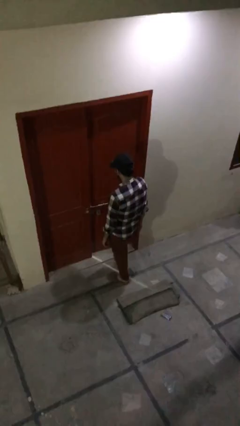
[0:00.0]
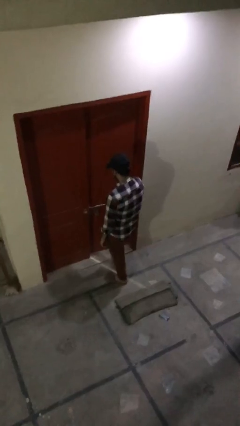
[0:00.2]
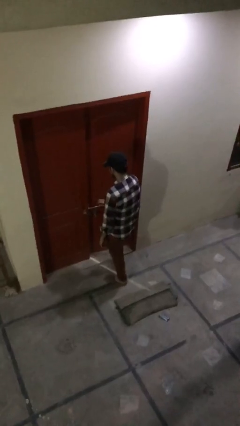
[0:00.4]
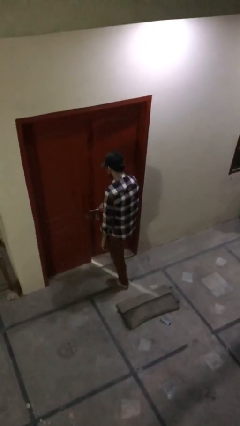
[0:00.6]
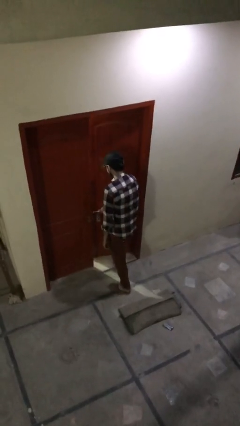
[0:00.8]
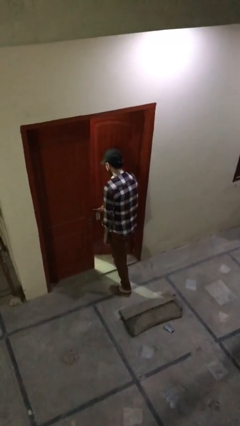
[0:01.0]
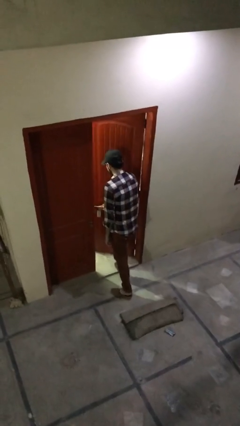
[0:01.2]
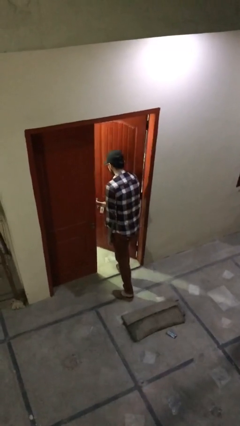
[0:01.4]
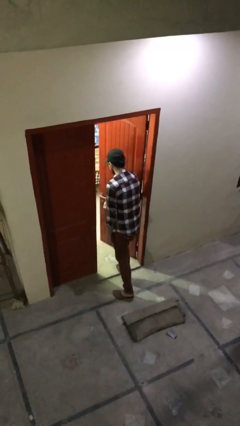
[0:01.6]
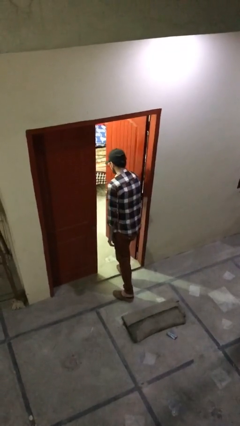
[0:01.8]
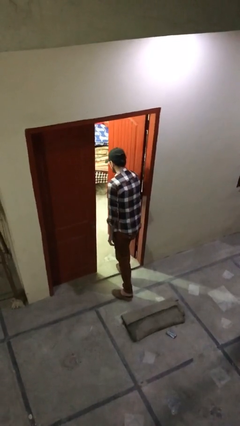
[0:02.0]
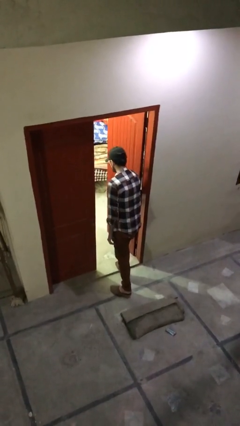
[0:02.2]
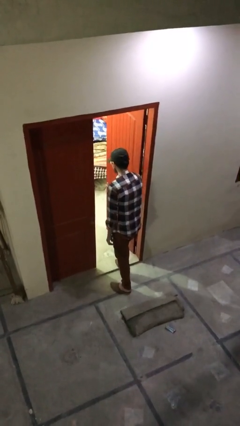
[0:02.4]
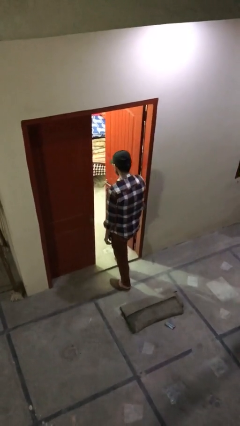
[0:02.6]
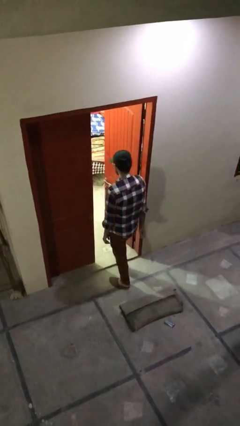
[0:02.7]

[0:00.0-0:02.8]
person opens facility door

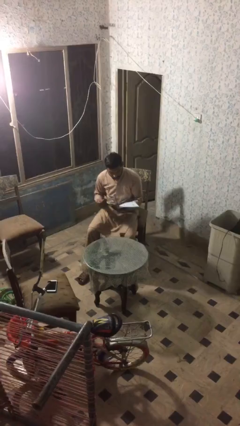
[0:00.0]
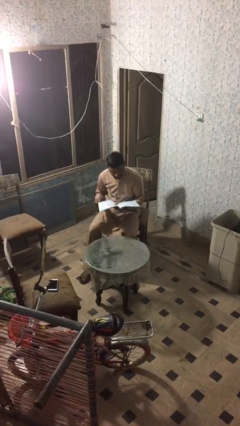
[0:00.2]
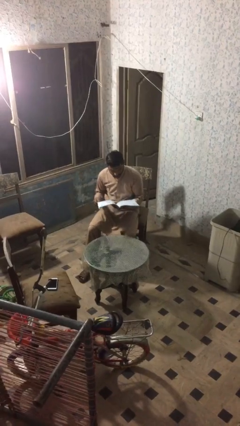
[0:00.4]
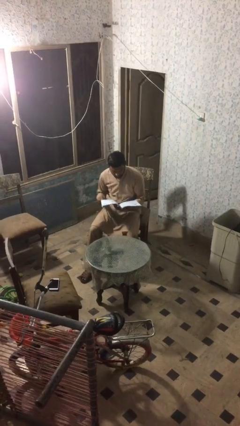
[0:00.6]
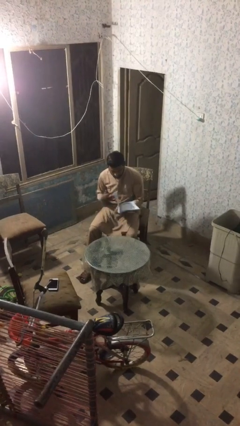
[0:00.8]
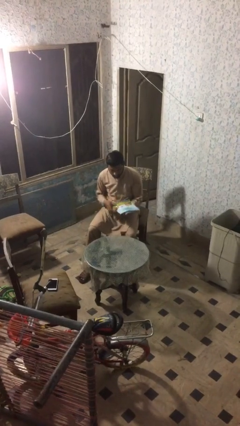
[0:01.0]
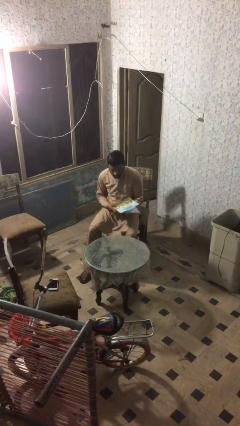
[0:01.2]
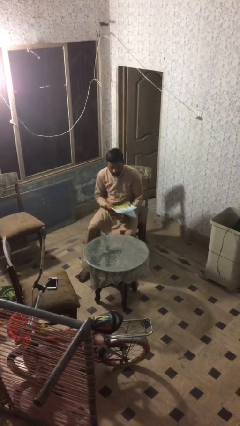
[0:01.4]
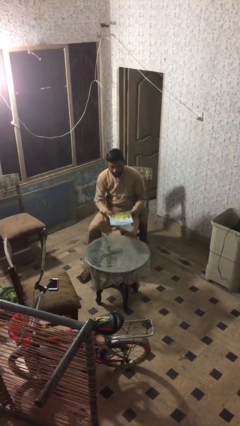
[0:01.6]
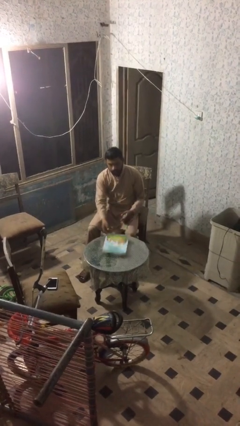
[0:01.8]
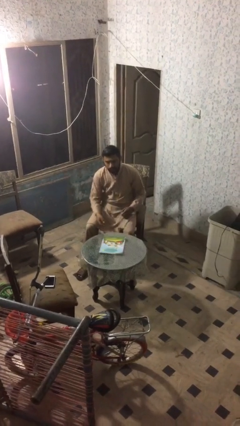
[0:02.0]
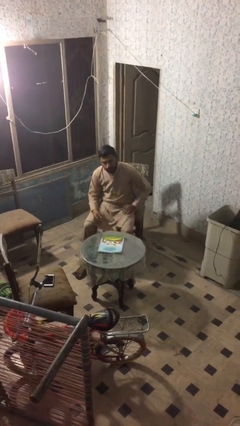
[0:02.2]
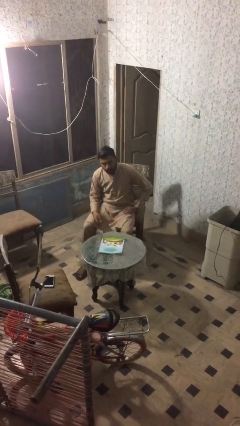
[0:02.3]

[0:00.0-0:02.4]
person puts down object on table

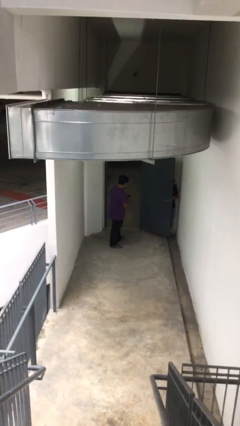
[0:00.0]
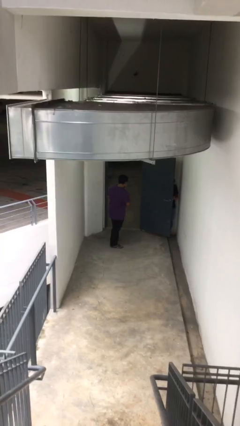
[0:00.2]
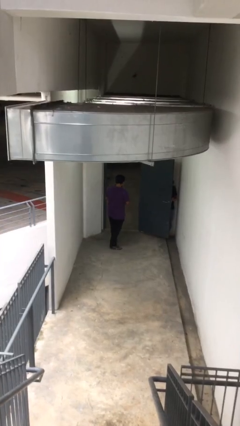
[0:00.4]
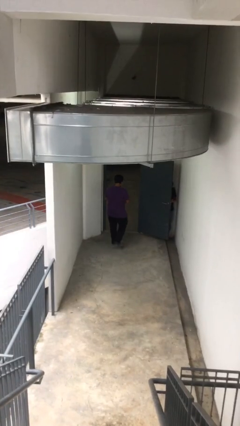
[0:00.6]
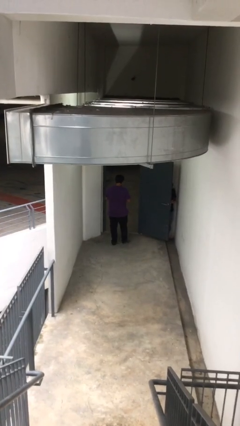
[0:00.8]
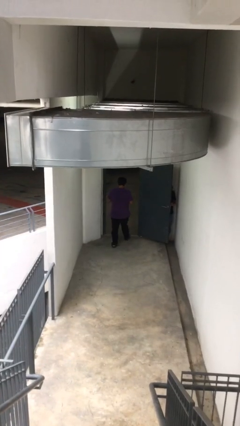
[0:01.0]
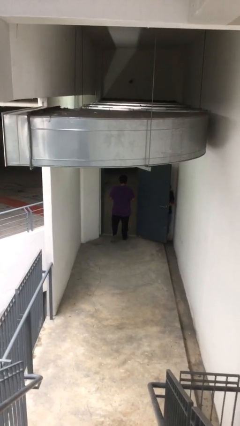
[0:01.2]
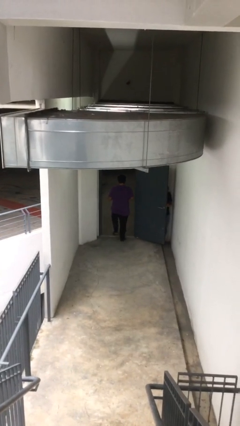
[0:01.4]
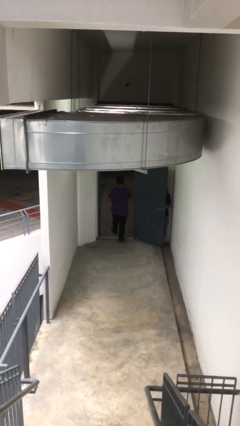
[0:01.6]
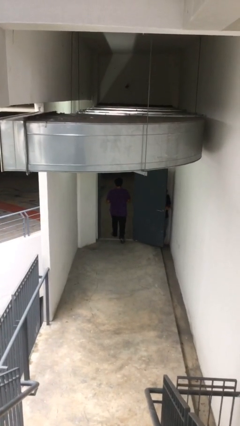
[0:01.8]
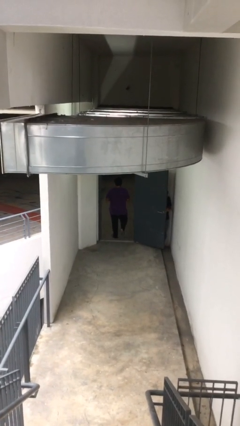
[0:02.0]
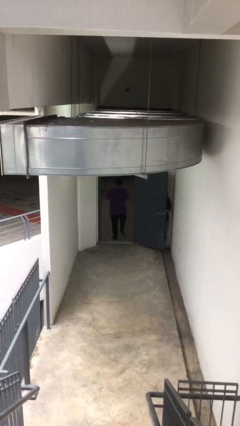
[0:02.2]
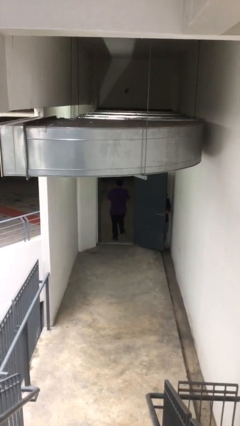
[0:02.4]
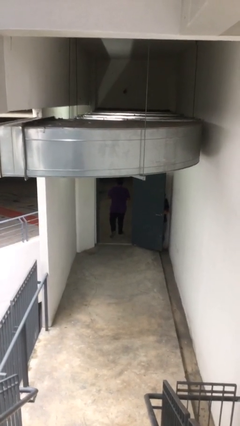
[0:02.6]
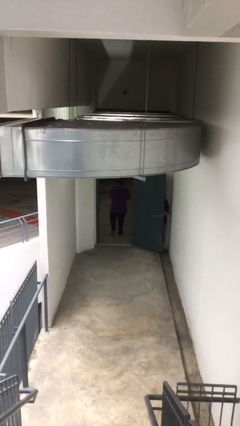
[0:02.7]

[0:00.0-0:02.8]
person exits scene through structure

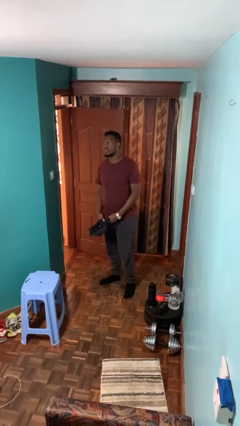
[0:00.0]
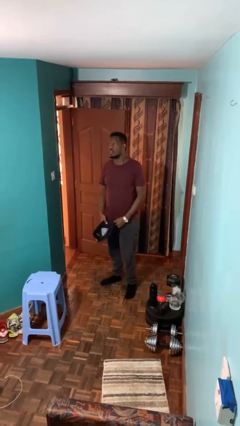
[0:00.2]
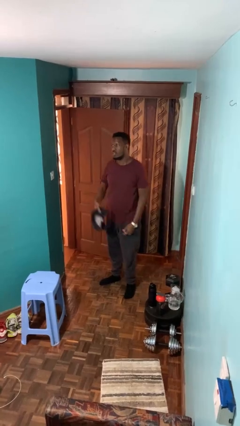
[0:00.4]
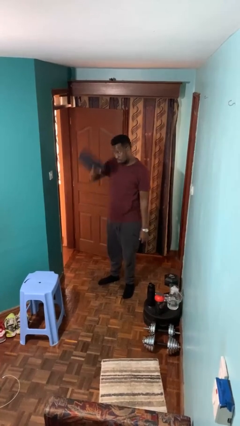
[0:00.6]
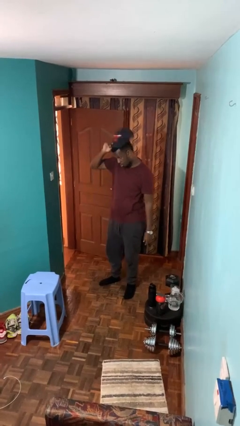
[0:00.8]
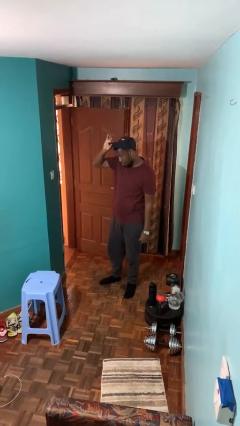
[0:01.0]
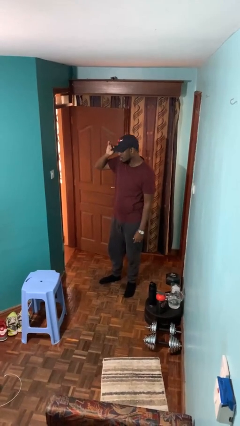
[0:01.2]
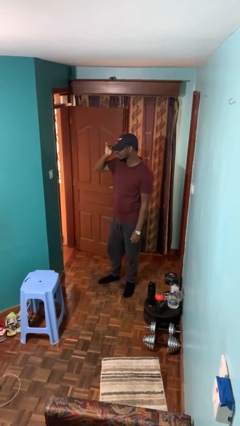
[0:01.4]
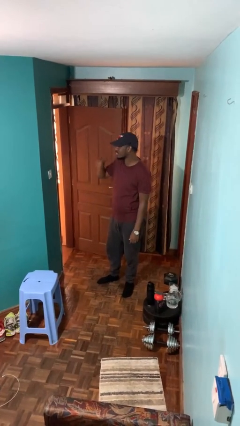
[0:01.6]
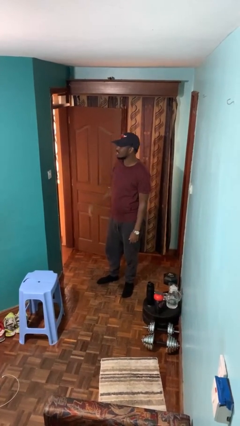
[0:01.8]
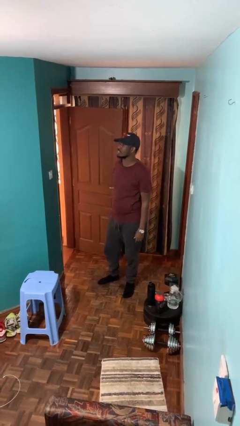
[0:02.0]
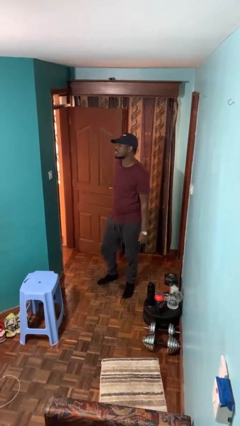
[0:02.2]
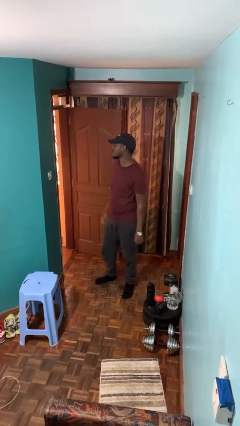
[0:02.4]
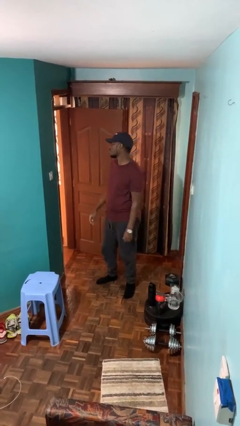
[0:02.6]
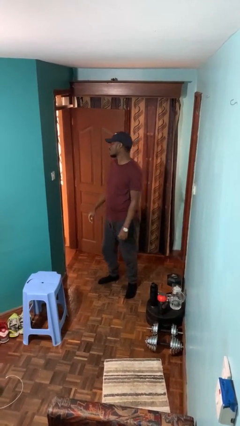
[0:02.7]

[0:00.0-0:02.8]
person puts on hat

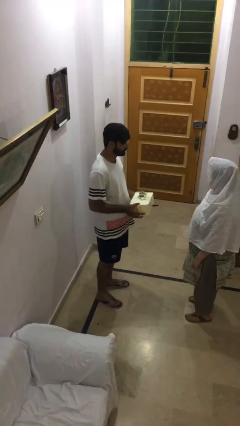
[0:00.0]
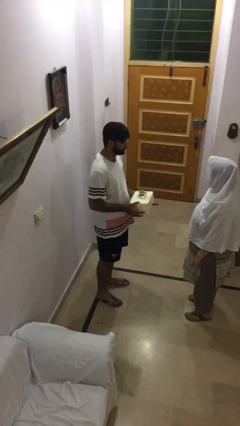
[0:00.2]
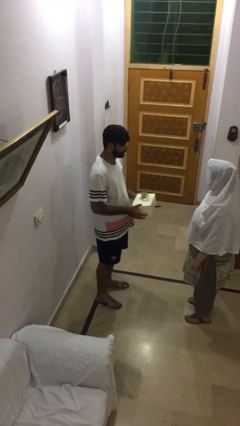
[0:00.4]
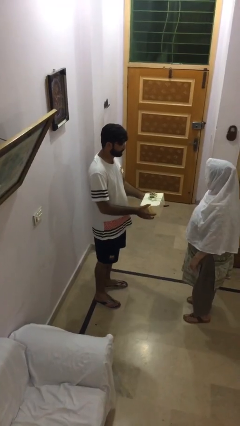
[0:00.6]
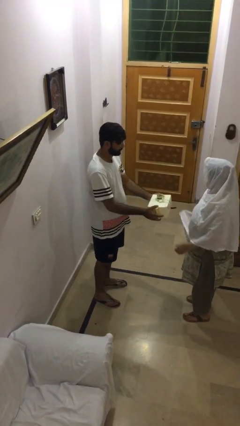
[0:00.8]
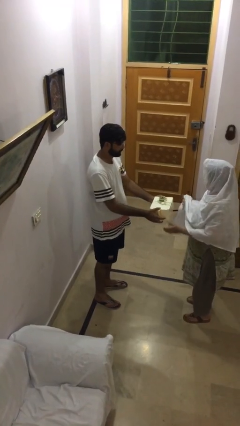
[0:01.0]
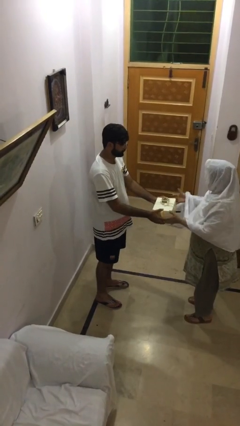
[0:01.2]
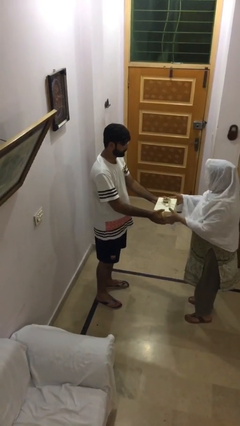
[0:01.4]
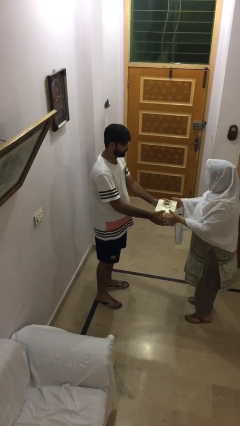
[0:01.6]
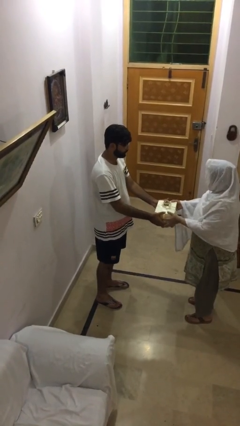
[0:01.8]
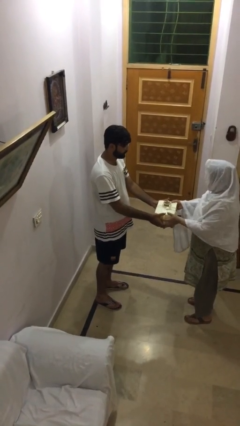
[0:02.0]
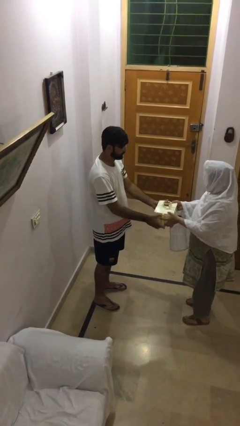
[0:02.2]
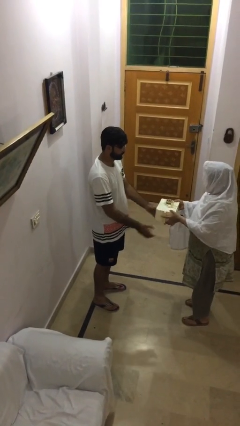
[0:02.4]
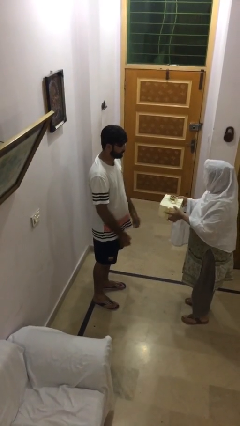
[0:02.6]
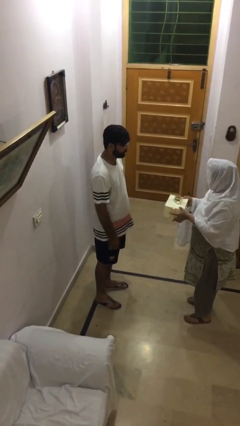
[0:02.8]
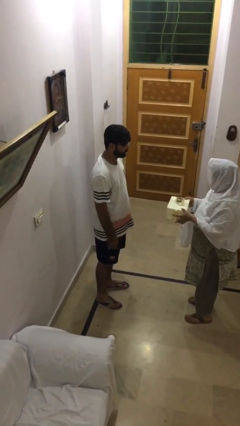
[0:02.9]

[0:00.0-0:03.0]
person transfers object to person

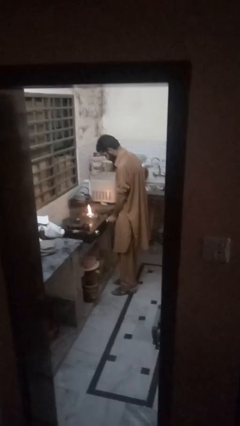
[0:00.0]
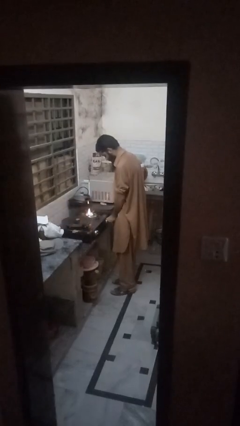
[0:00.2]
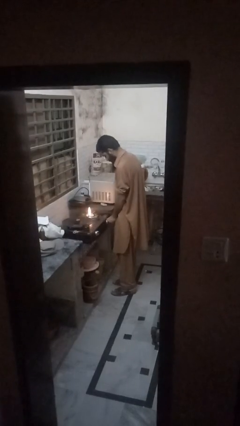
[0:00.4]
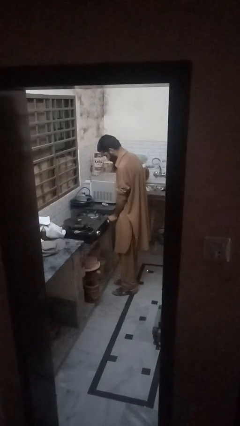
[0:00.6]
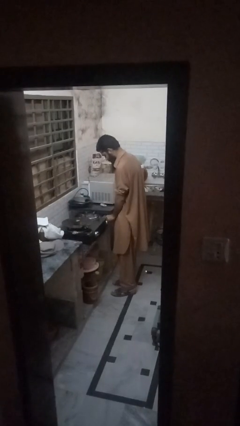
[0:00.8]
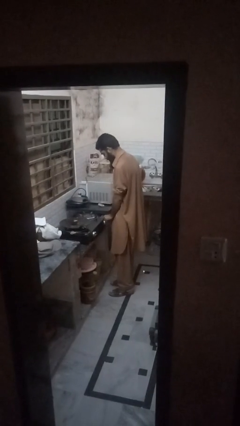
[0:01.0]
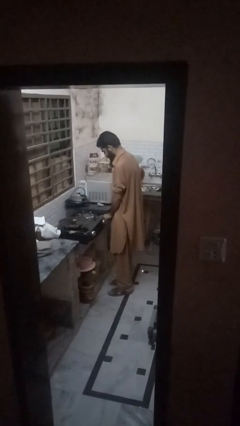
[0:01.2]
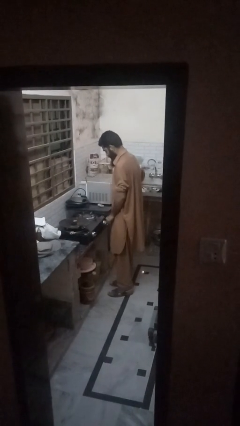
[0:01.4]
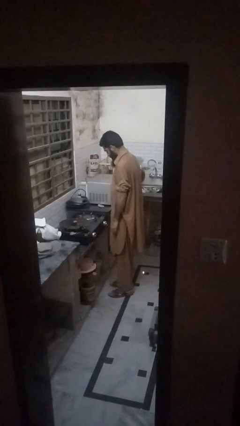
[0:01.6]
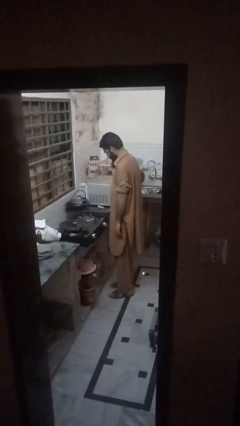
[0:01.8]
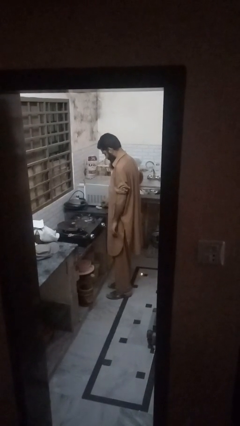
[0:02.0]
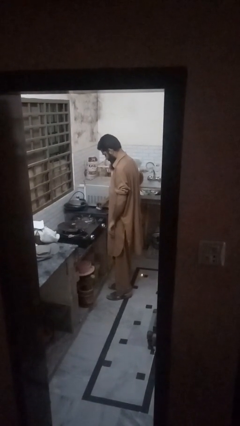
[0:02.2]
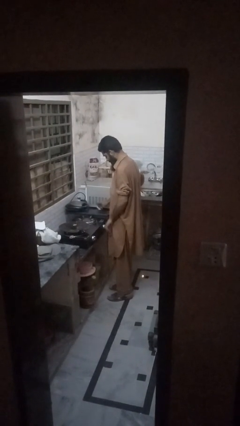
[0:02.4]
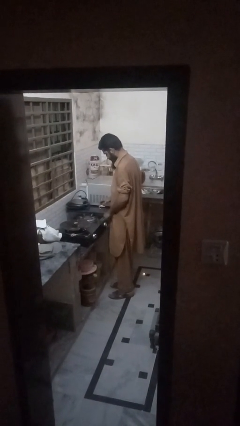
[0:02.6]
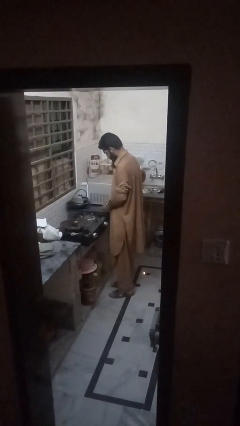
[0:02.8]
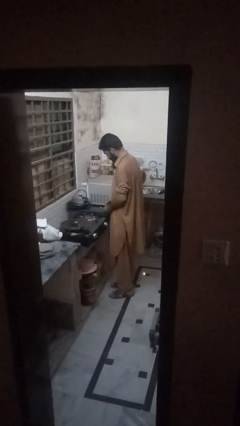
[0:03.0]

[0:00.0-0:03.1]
person turns off stovetop

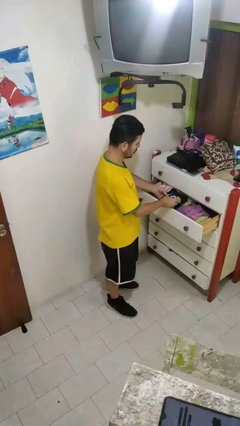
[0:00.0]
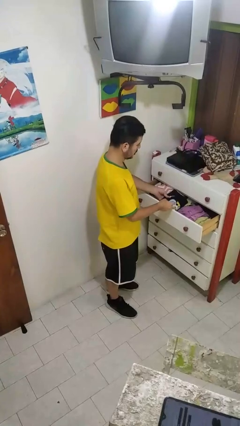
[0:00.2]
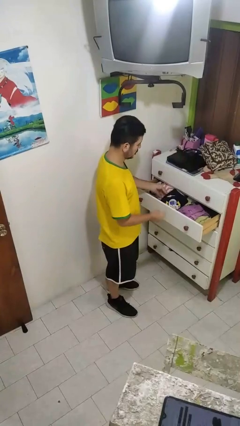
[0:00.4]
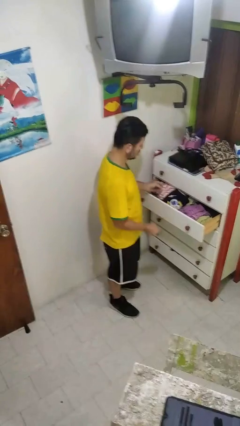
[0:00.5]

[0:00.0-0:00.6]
person puts clothes into dresser
